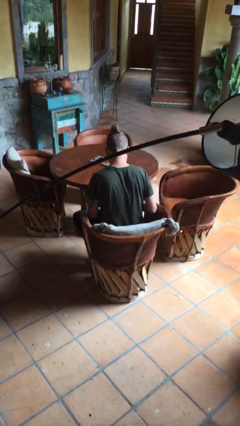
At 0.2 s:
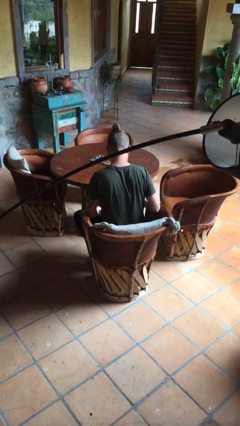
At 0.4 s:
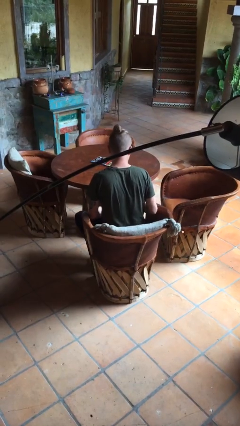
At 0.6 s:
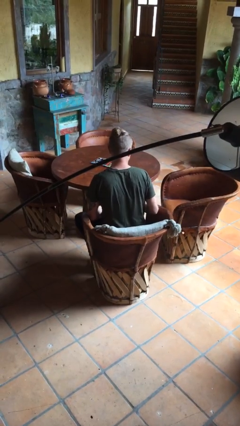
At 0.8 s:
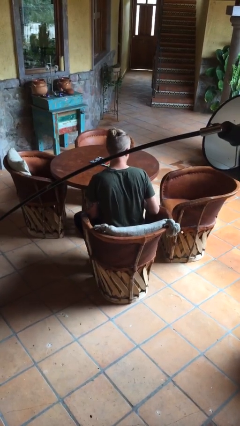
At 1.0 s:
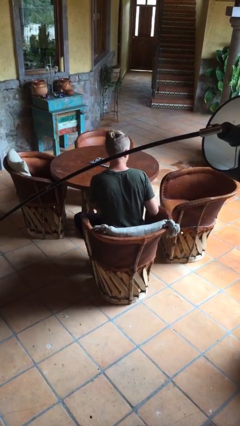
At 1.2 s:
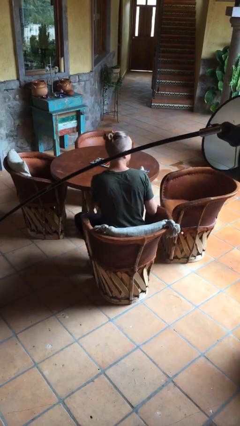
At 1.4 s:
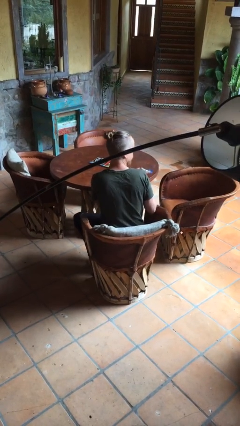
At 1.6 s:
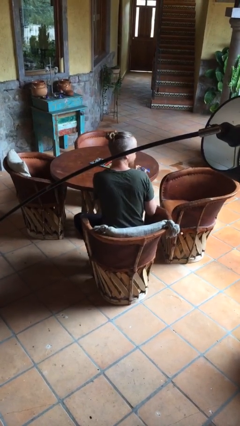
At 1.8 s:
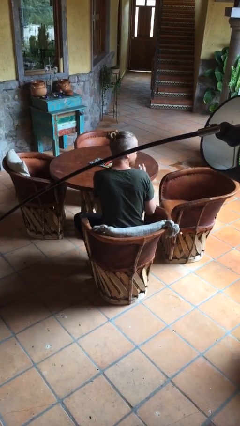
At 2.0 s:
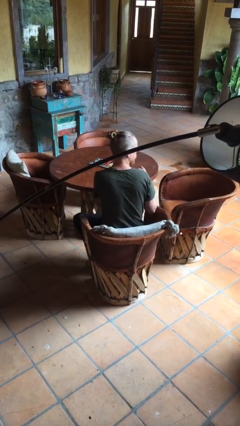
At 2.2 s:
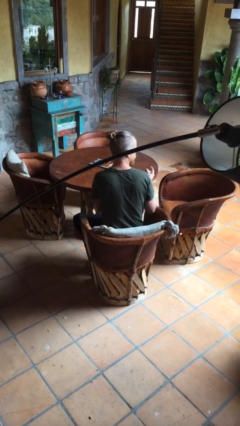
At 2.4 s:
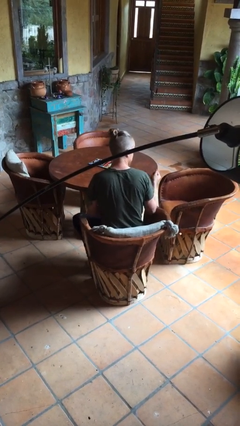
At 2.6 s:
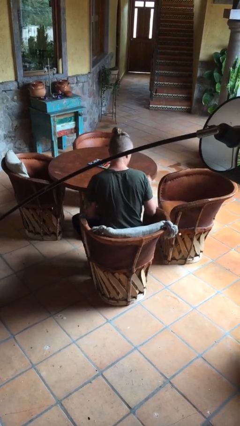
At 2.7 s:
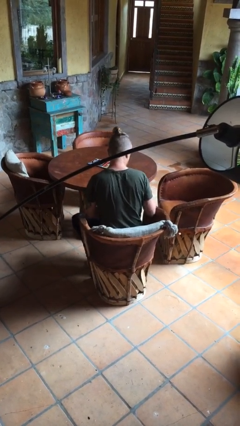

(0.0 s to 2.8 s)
person crumples paper

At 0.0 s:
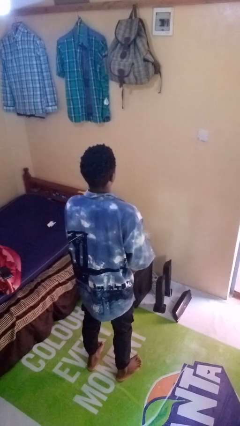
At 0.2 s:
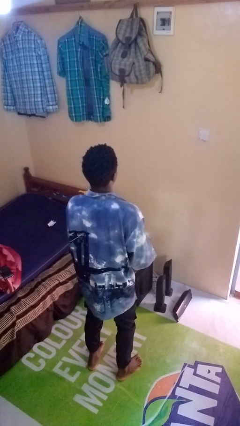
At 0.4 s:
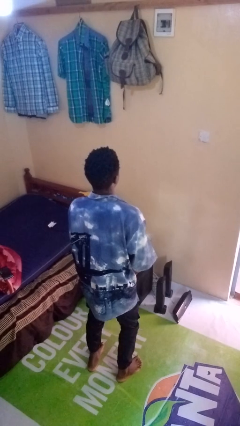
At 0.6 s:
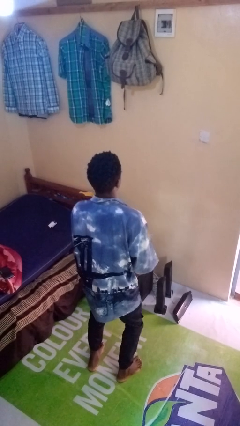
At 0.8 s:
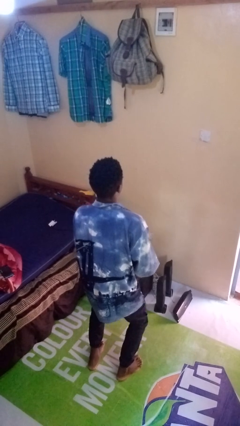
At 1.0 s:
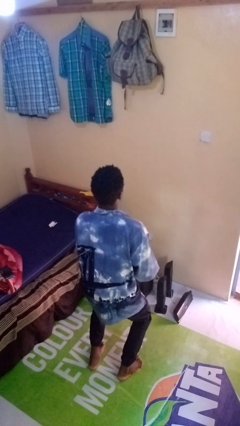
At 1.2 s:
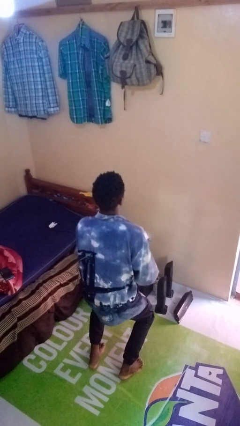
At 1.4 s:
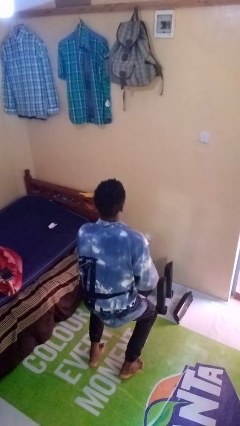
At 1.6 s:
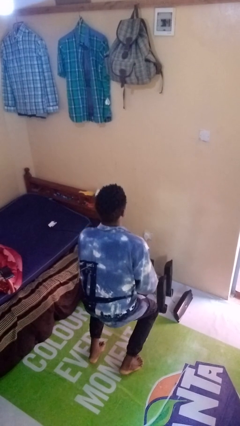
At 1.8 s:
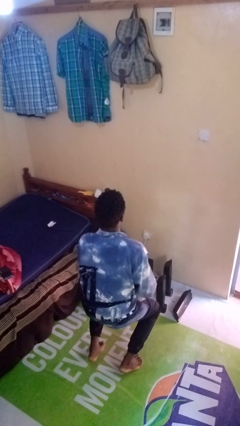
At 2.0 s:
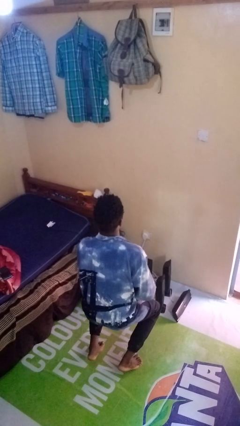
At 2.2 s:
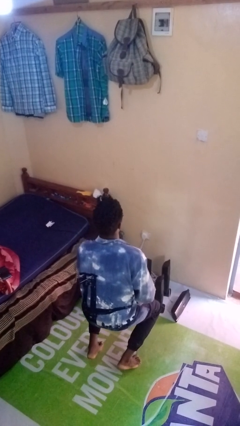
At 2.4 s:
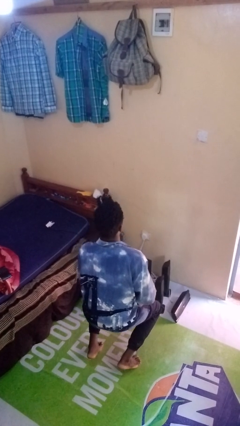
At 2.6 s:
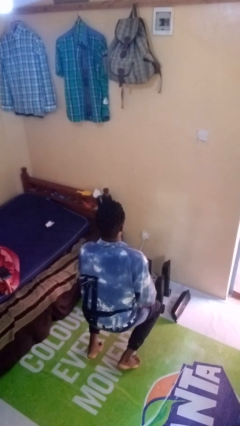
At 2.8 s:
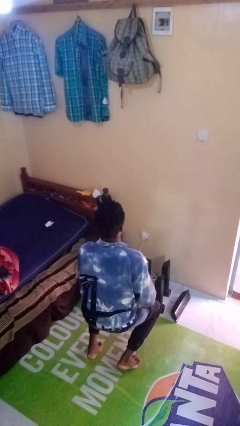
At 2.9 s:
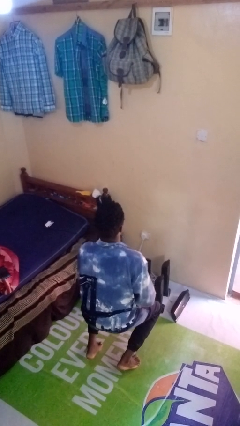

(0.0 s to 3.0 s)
person squats

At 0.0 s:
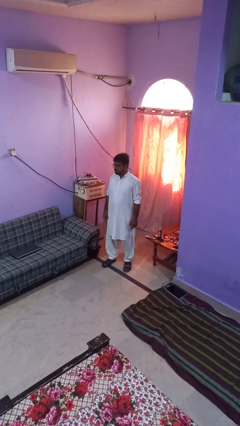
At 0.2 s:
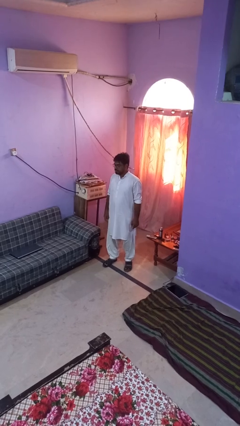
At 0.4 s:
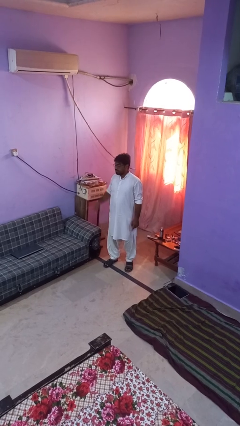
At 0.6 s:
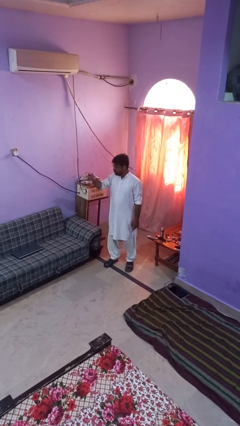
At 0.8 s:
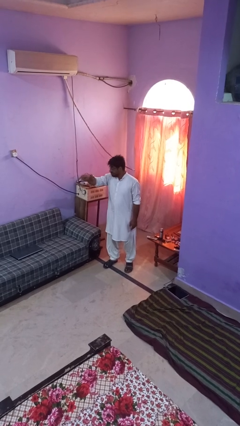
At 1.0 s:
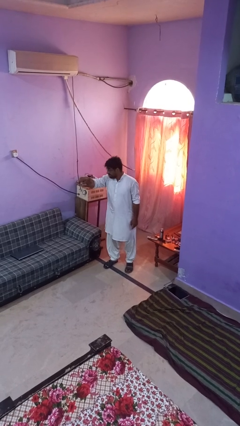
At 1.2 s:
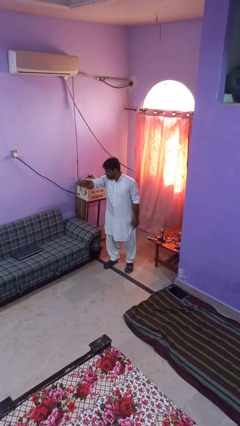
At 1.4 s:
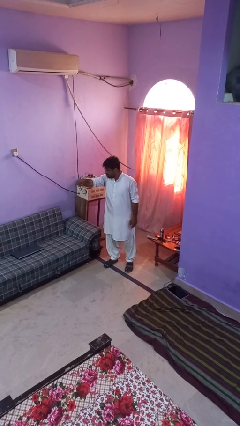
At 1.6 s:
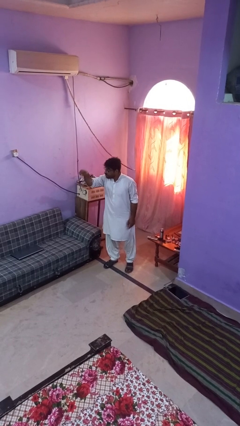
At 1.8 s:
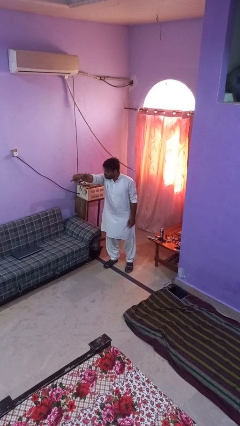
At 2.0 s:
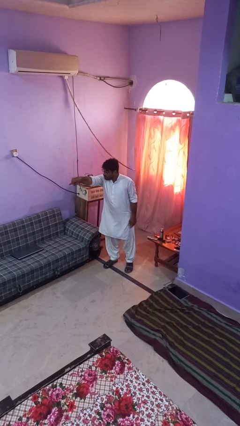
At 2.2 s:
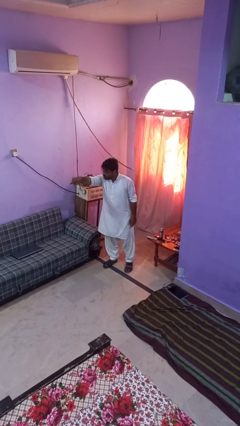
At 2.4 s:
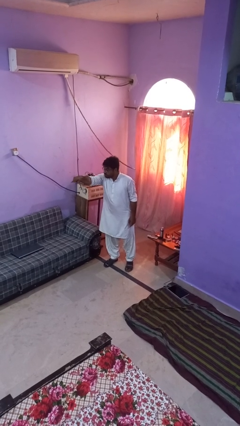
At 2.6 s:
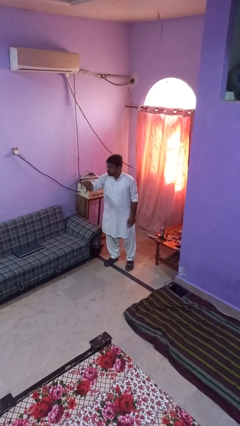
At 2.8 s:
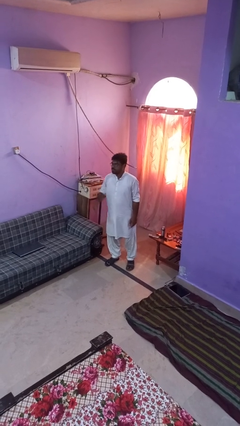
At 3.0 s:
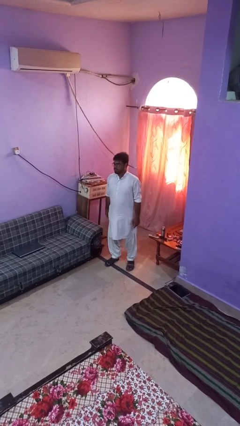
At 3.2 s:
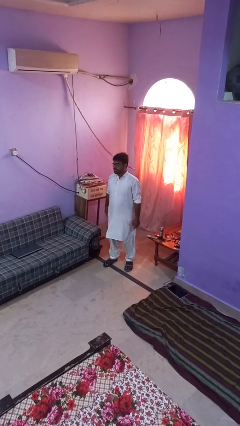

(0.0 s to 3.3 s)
person points at person

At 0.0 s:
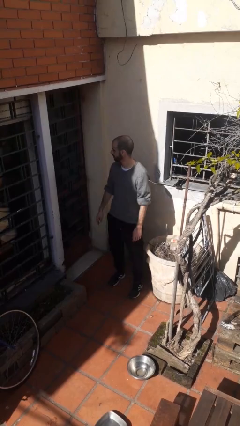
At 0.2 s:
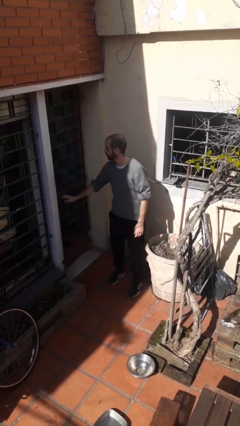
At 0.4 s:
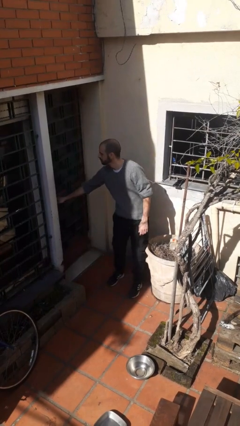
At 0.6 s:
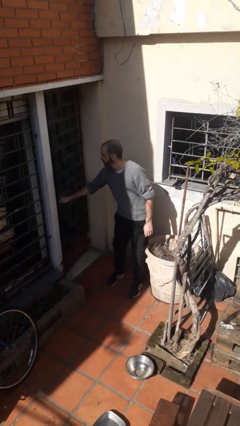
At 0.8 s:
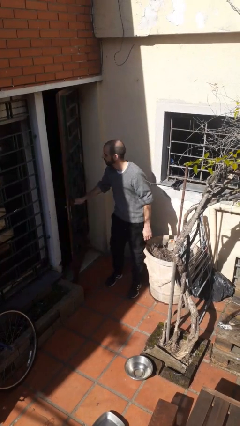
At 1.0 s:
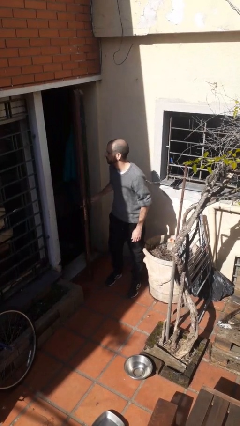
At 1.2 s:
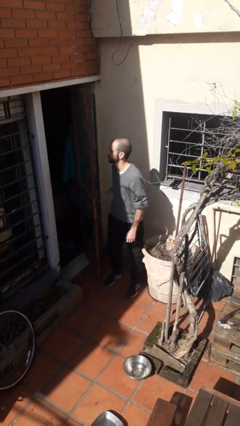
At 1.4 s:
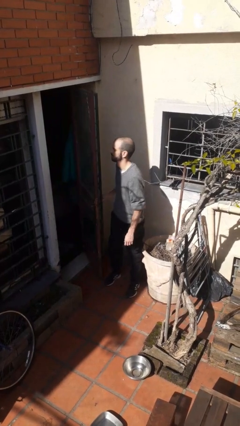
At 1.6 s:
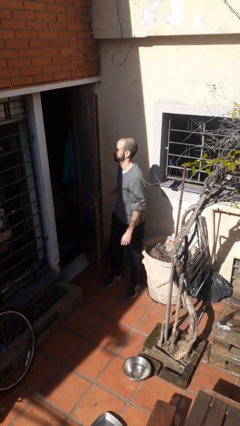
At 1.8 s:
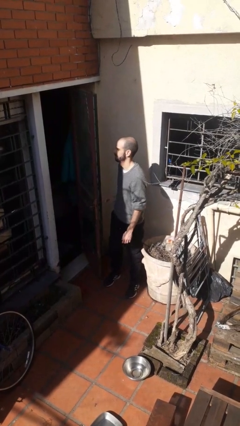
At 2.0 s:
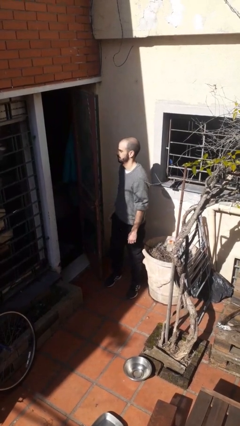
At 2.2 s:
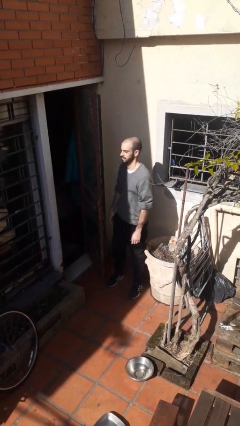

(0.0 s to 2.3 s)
person opens facility door

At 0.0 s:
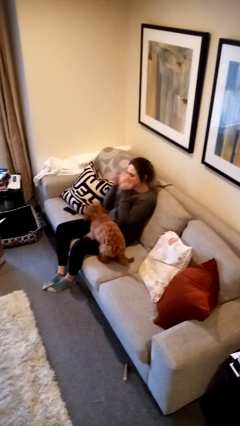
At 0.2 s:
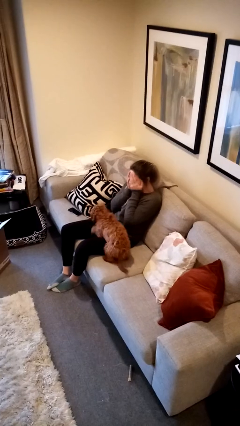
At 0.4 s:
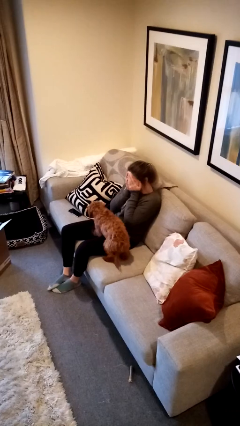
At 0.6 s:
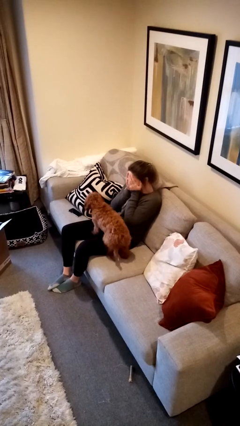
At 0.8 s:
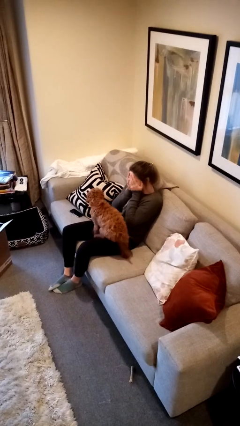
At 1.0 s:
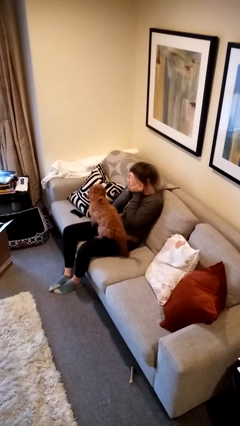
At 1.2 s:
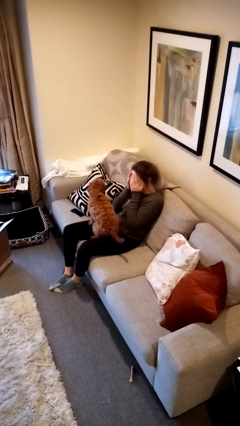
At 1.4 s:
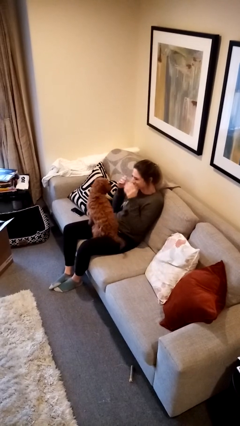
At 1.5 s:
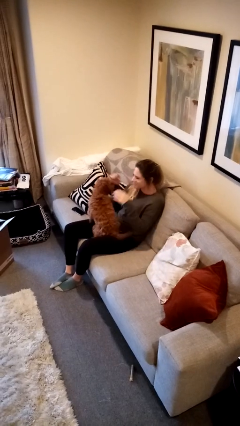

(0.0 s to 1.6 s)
person covers face with hands

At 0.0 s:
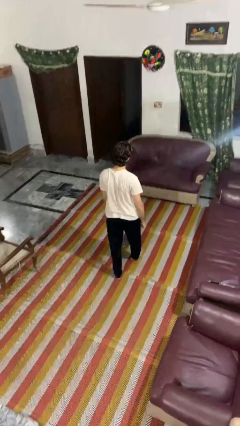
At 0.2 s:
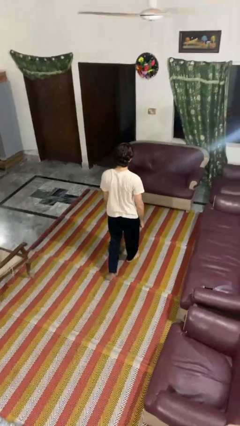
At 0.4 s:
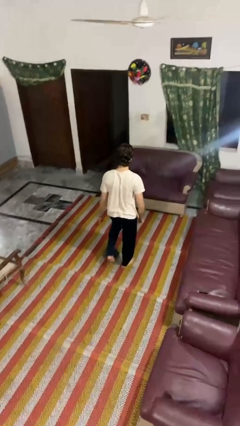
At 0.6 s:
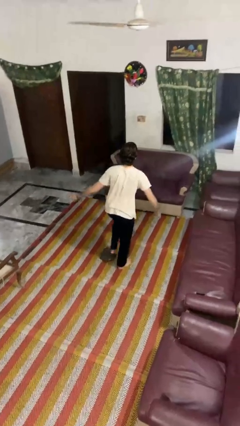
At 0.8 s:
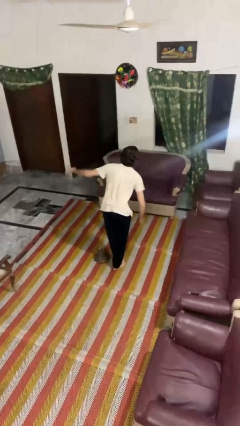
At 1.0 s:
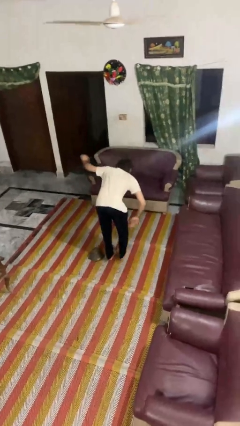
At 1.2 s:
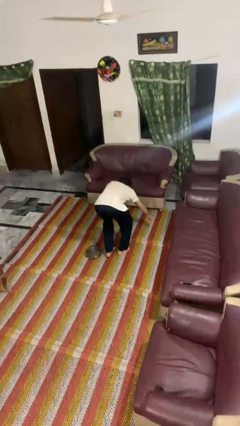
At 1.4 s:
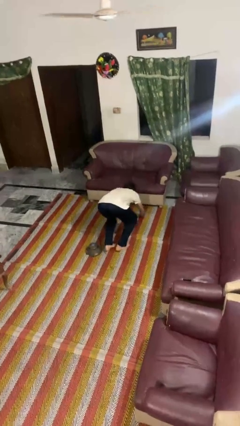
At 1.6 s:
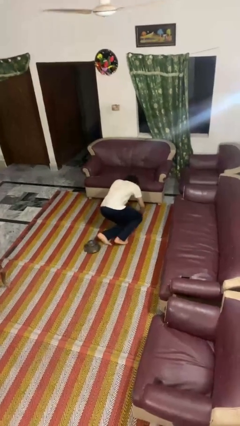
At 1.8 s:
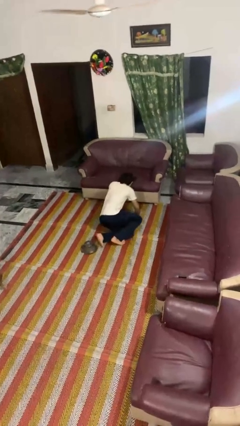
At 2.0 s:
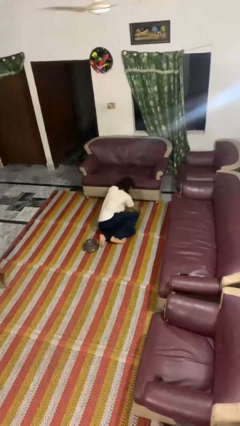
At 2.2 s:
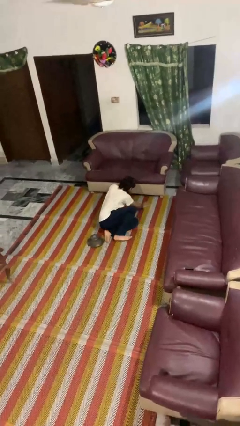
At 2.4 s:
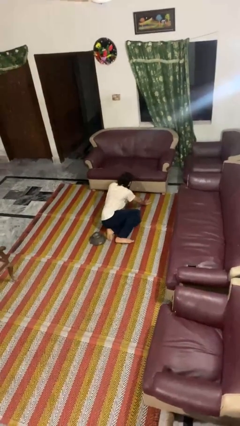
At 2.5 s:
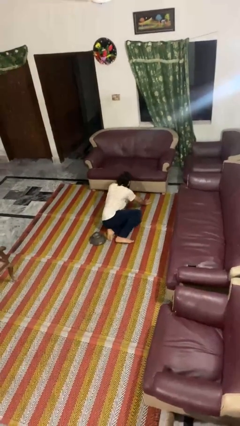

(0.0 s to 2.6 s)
person trips on object on floor

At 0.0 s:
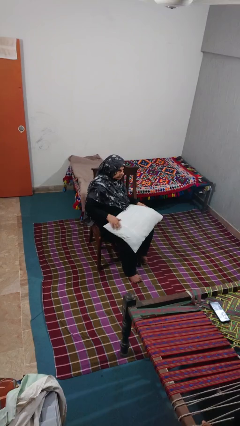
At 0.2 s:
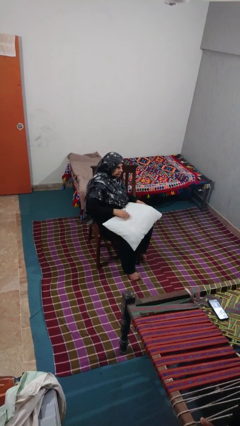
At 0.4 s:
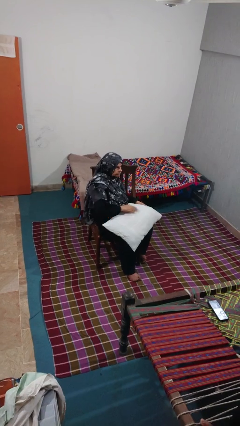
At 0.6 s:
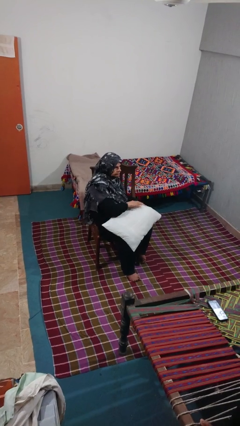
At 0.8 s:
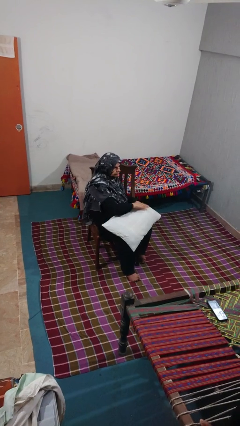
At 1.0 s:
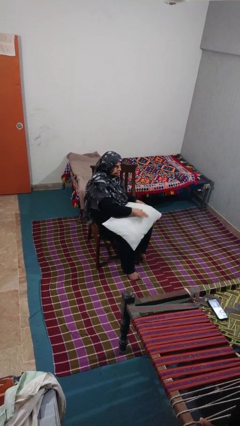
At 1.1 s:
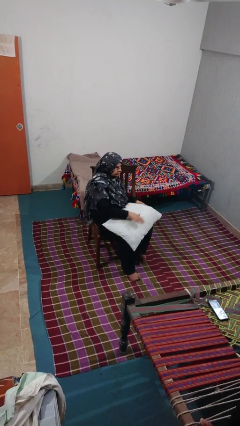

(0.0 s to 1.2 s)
person waves hand over object

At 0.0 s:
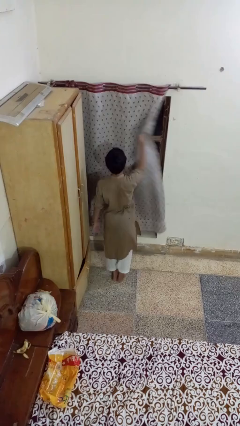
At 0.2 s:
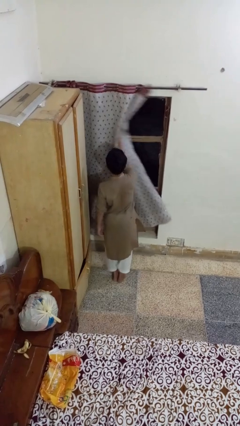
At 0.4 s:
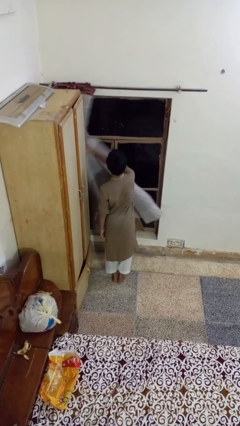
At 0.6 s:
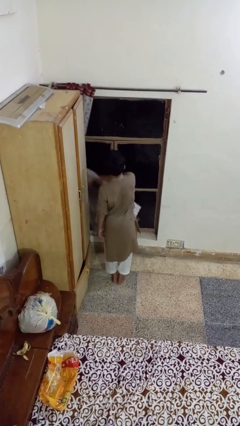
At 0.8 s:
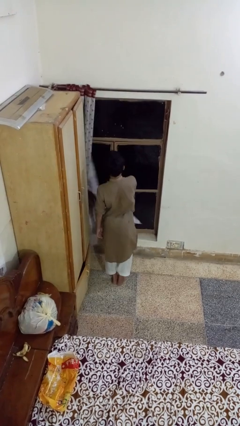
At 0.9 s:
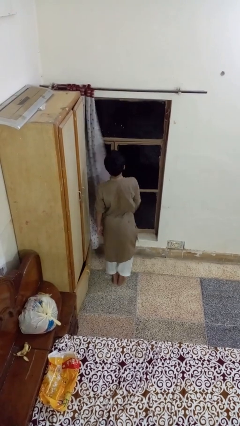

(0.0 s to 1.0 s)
person opens curtains
